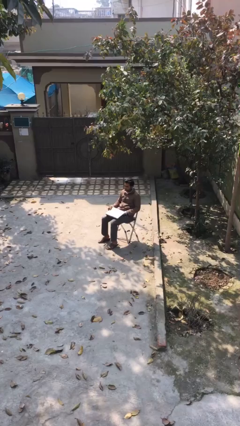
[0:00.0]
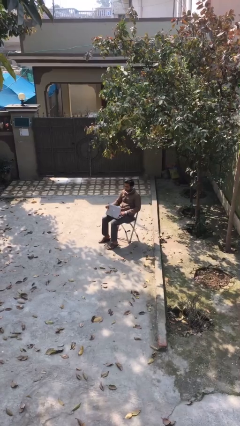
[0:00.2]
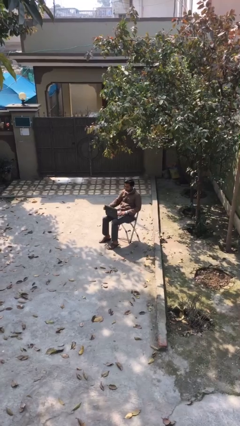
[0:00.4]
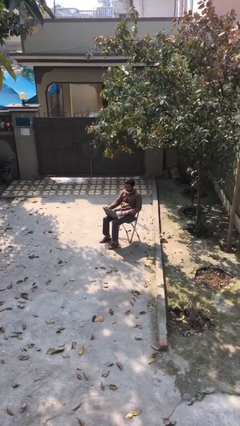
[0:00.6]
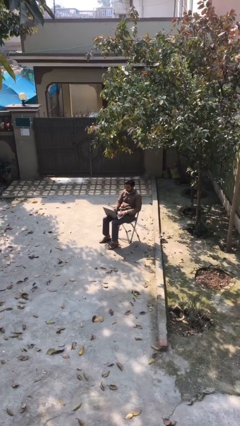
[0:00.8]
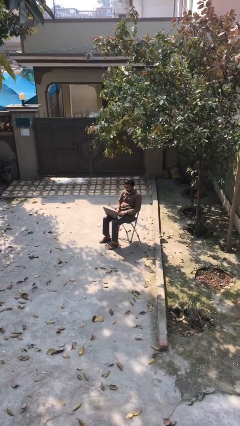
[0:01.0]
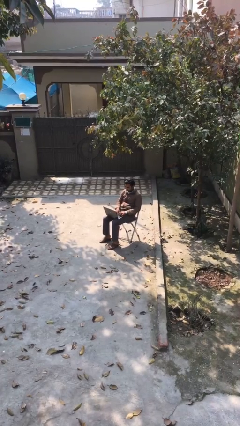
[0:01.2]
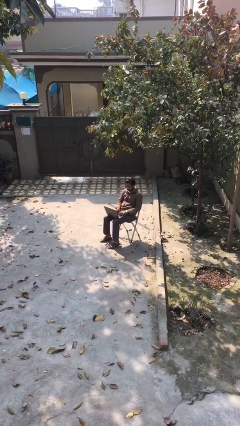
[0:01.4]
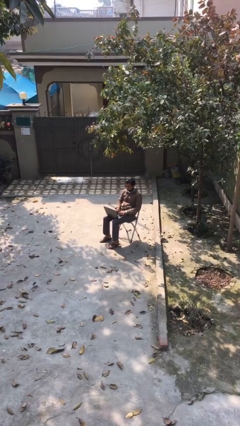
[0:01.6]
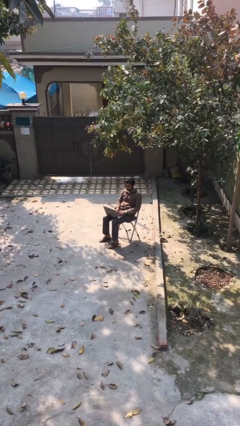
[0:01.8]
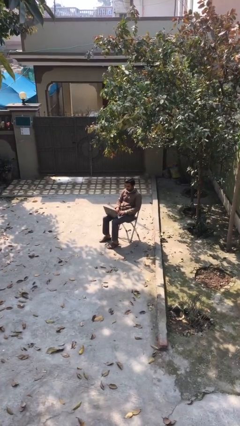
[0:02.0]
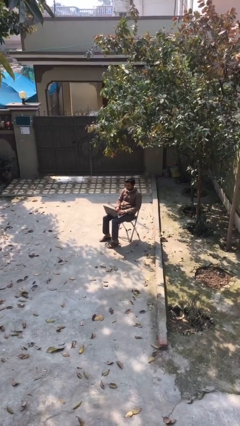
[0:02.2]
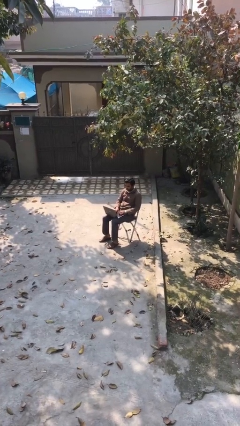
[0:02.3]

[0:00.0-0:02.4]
person interacts with laptop

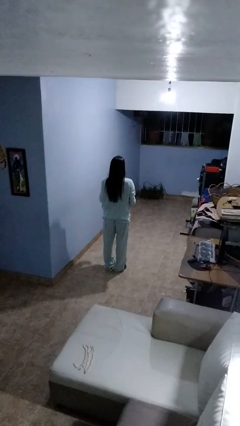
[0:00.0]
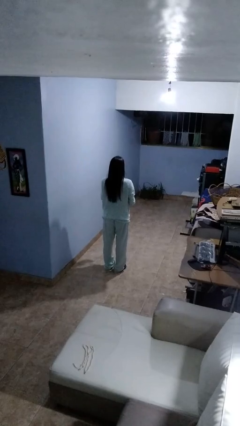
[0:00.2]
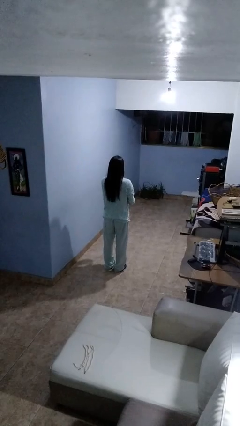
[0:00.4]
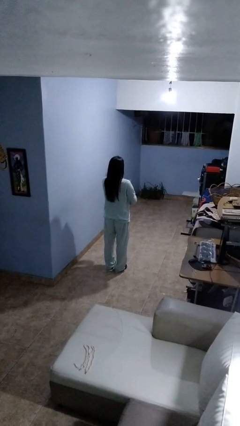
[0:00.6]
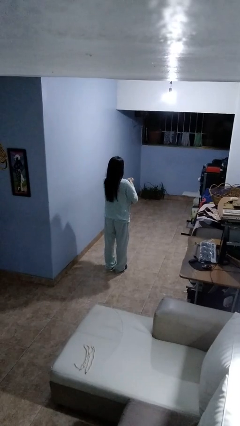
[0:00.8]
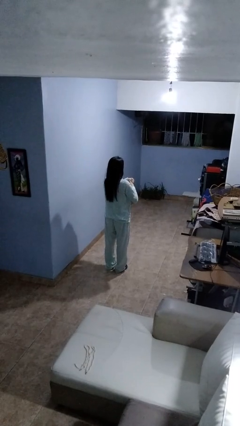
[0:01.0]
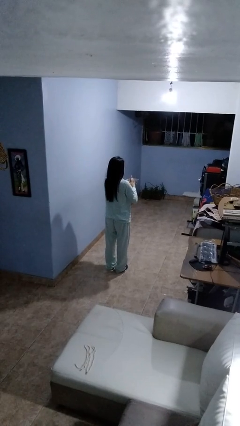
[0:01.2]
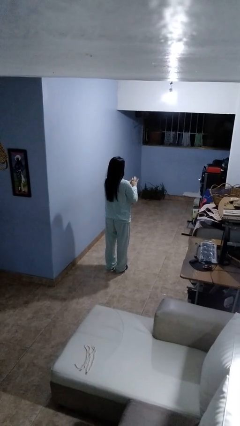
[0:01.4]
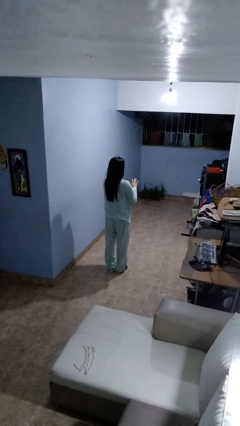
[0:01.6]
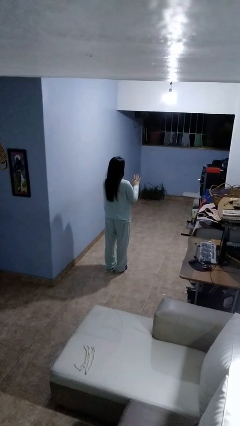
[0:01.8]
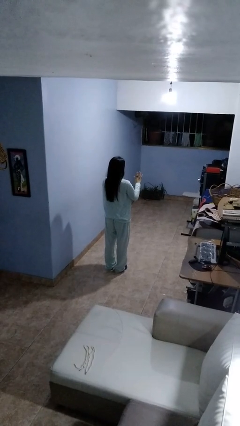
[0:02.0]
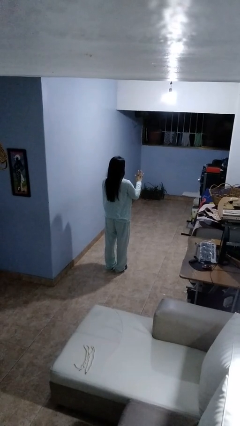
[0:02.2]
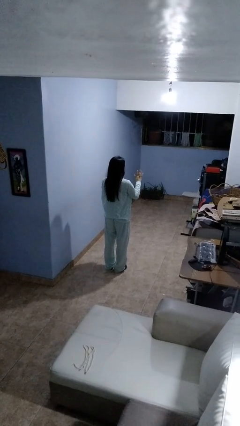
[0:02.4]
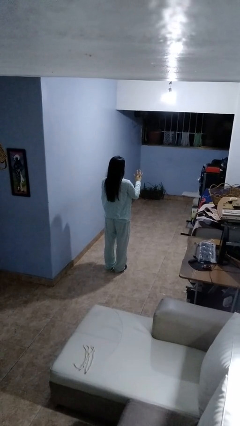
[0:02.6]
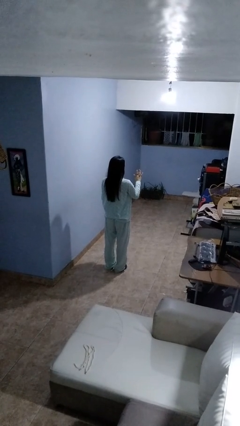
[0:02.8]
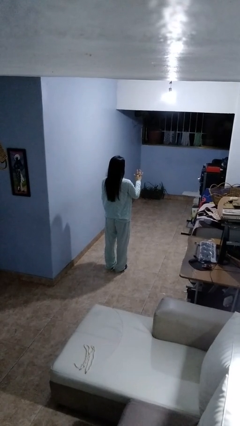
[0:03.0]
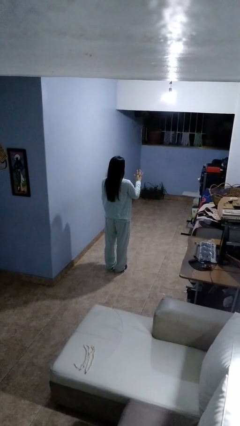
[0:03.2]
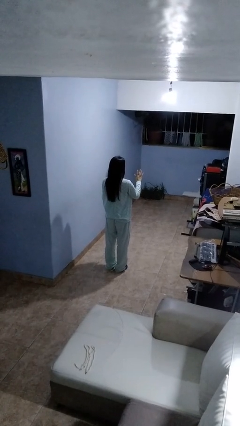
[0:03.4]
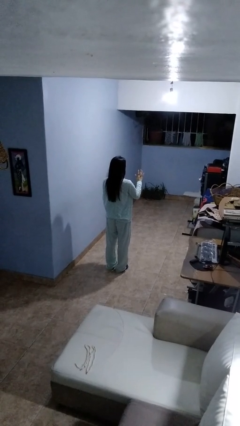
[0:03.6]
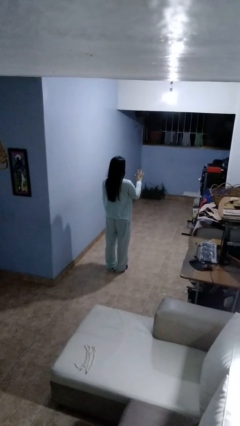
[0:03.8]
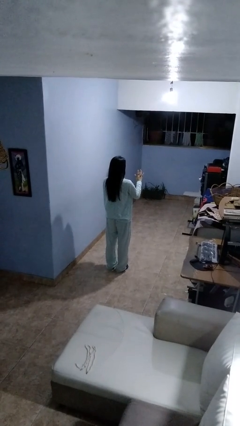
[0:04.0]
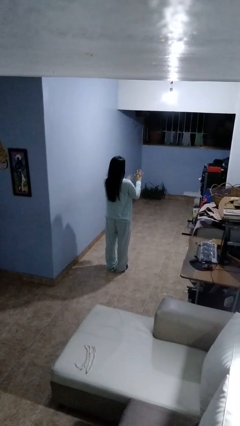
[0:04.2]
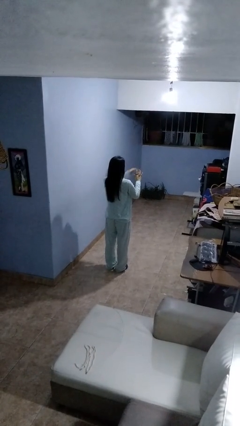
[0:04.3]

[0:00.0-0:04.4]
person puts on ring

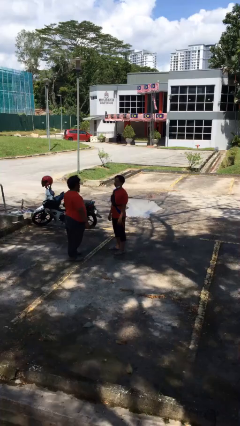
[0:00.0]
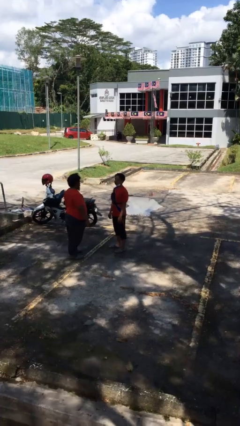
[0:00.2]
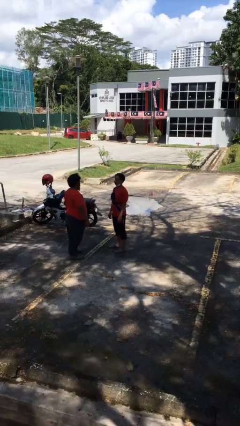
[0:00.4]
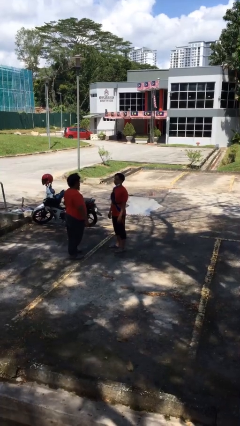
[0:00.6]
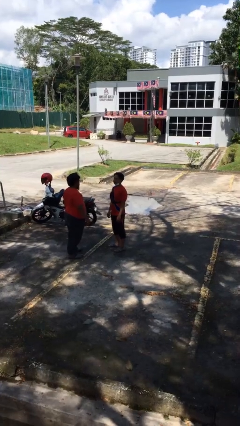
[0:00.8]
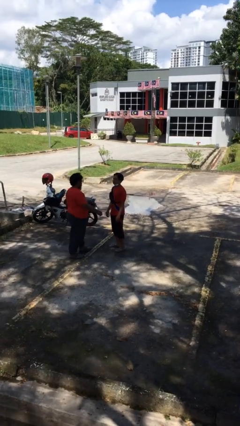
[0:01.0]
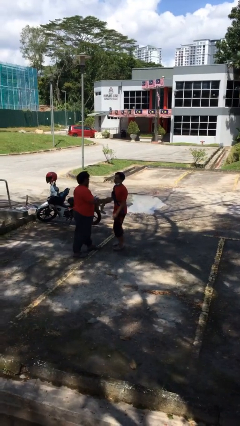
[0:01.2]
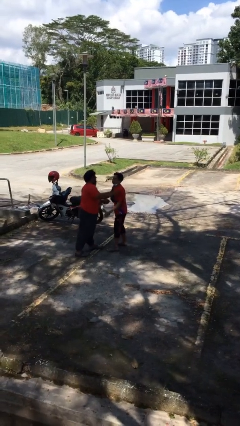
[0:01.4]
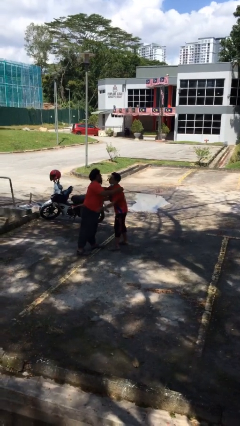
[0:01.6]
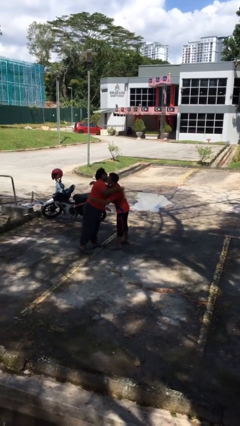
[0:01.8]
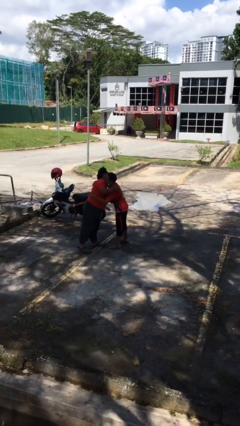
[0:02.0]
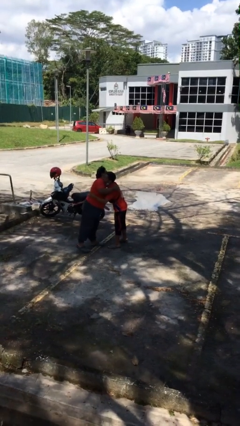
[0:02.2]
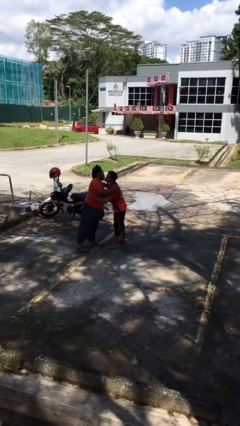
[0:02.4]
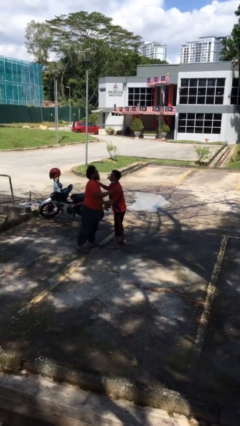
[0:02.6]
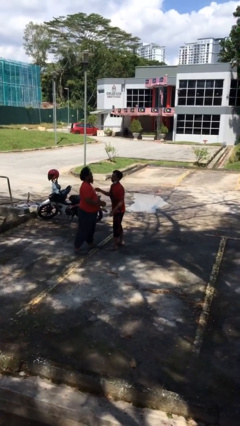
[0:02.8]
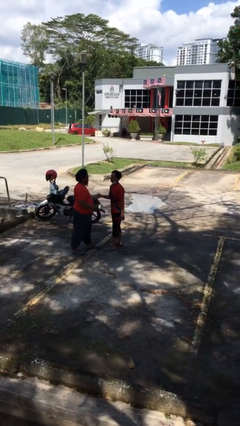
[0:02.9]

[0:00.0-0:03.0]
person embraces person

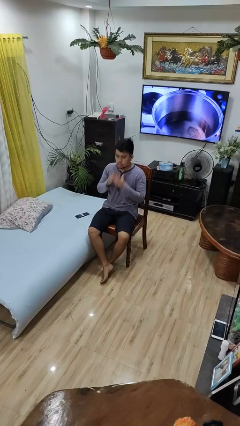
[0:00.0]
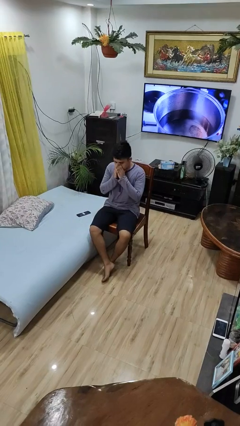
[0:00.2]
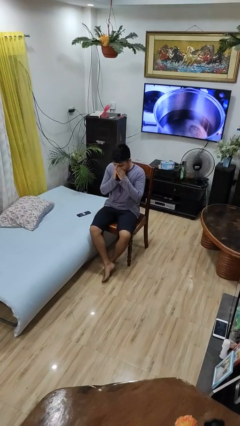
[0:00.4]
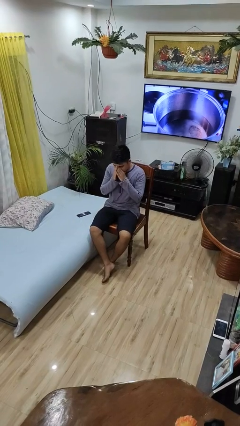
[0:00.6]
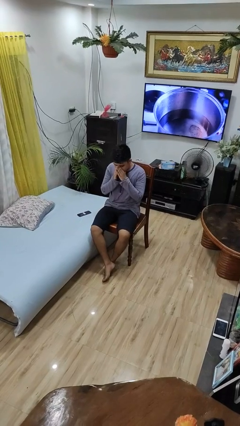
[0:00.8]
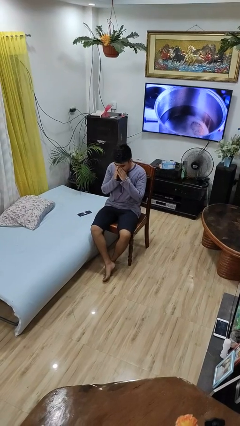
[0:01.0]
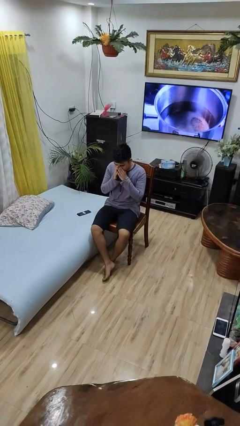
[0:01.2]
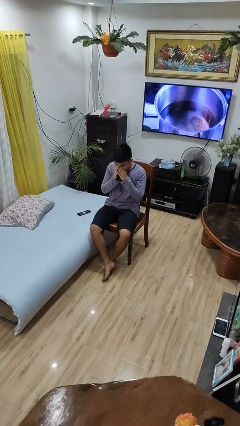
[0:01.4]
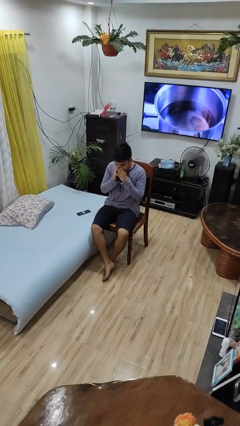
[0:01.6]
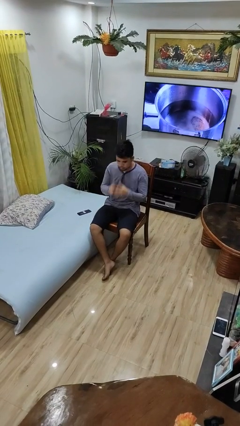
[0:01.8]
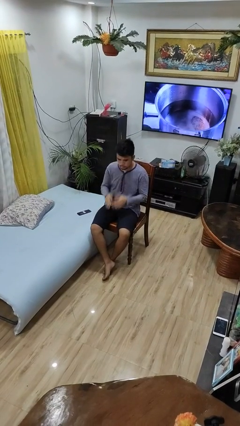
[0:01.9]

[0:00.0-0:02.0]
person sneezes into hand

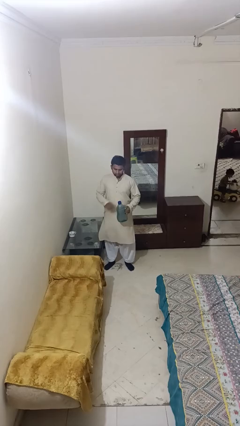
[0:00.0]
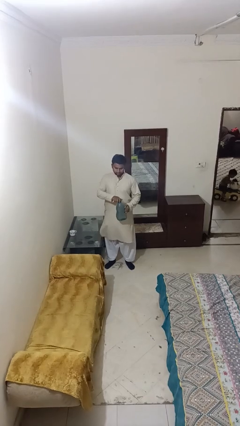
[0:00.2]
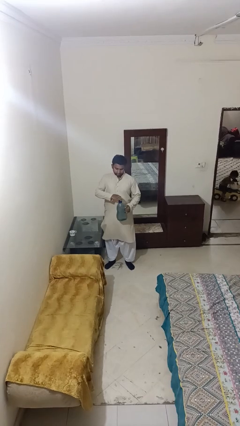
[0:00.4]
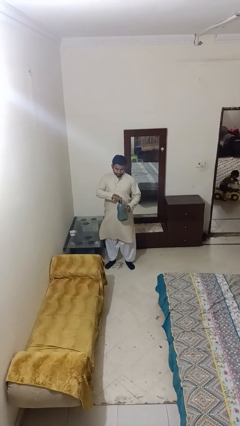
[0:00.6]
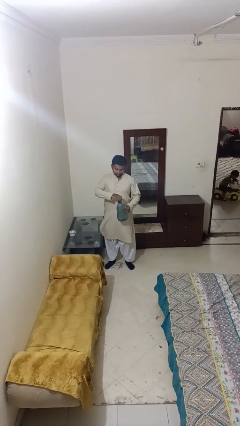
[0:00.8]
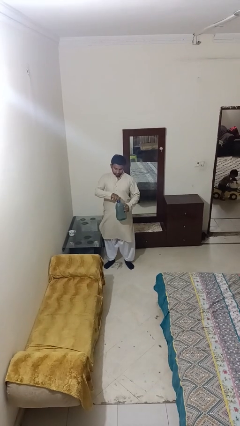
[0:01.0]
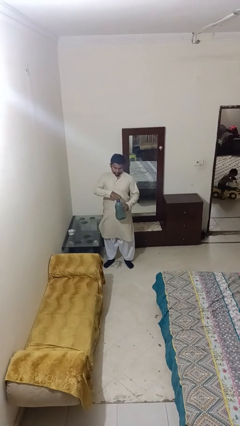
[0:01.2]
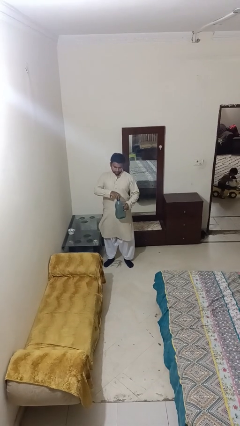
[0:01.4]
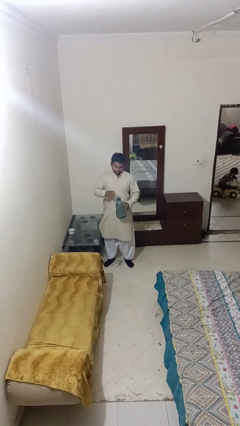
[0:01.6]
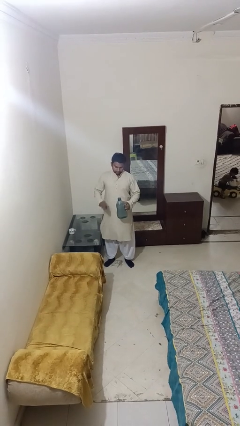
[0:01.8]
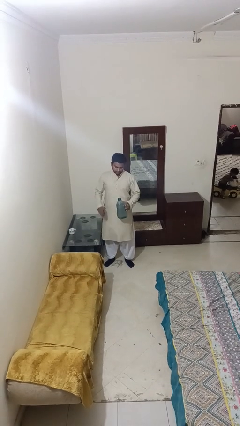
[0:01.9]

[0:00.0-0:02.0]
person unscrews lid from bottle

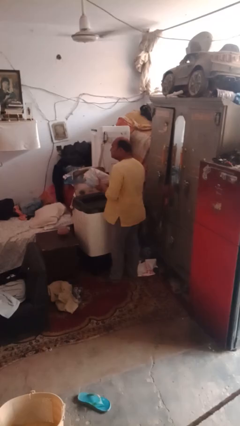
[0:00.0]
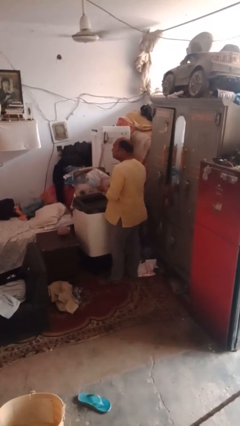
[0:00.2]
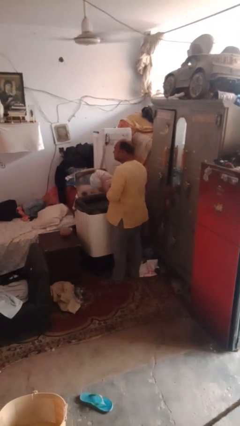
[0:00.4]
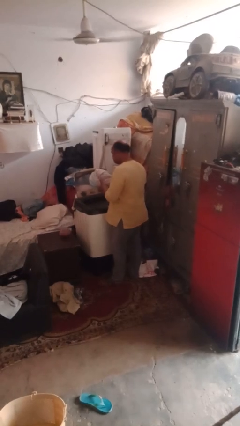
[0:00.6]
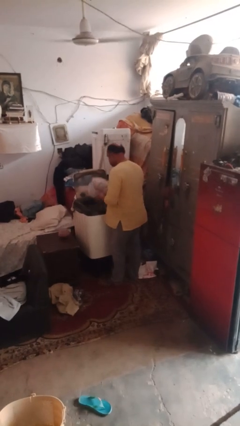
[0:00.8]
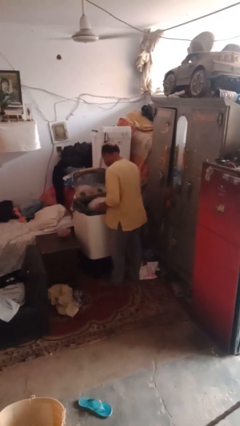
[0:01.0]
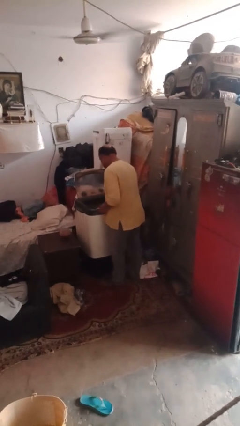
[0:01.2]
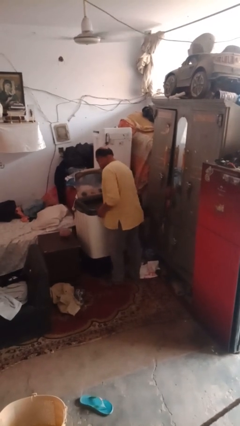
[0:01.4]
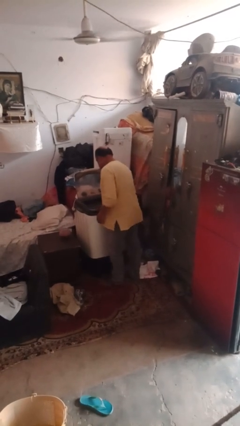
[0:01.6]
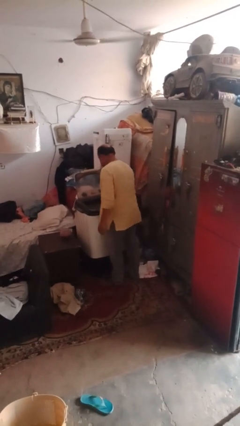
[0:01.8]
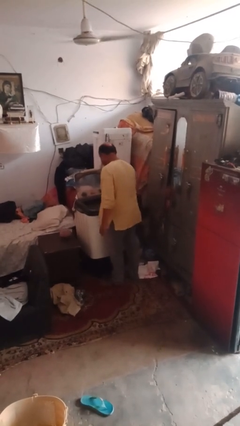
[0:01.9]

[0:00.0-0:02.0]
person loads clotheswasher

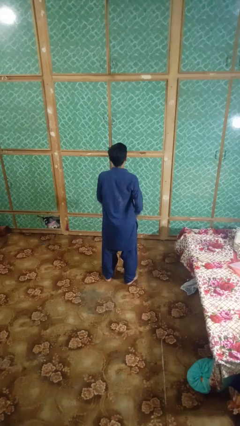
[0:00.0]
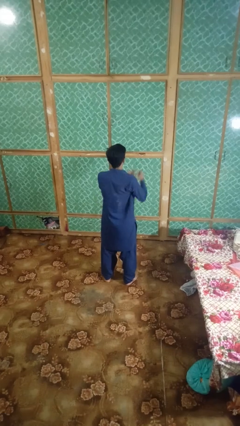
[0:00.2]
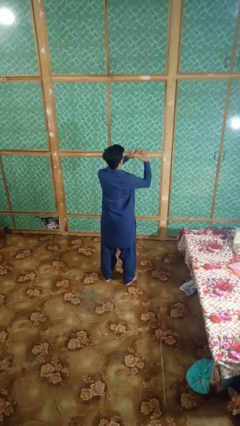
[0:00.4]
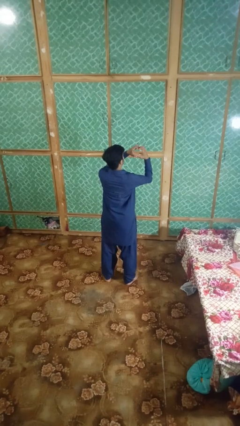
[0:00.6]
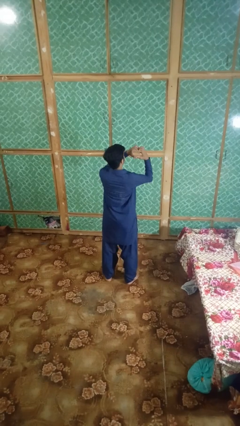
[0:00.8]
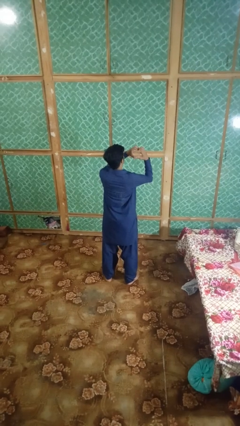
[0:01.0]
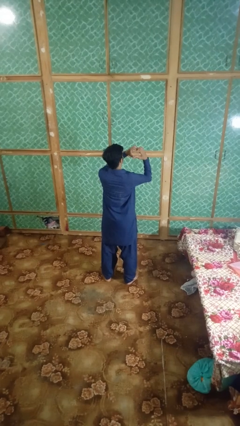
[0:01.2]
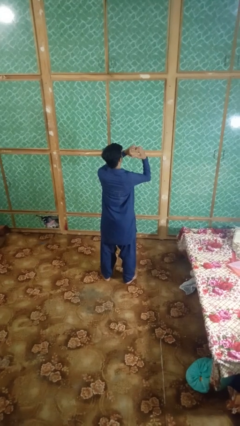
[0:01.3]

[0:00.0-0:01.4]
person gestures heart
